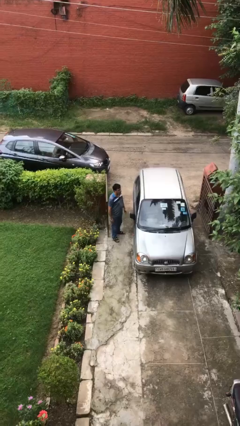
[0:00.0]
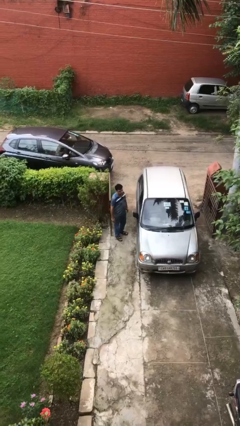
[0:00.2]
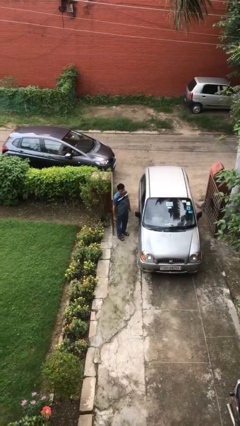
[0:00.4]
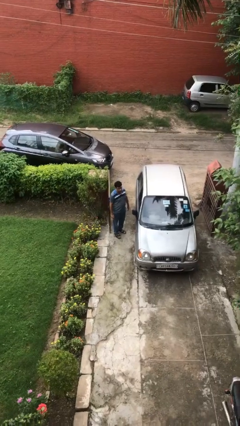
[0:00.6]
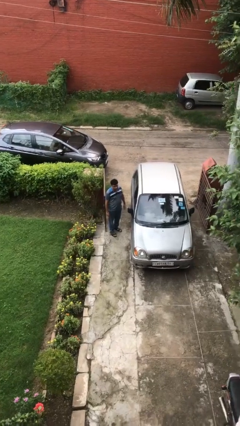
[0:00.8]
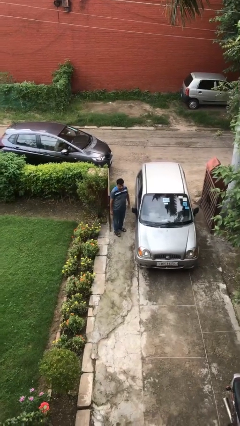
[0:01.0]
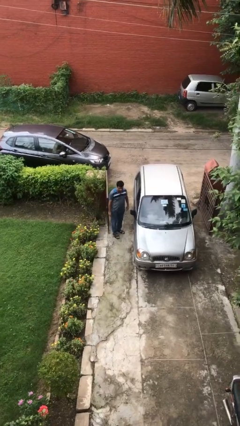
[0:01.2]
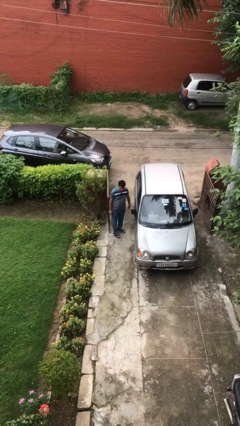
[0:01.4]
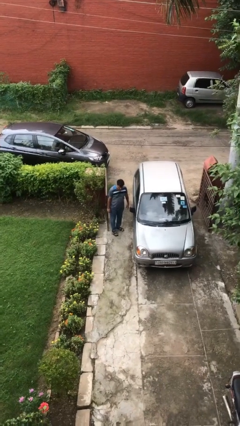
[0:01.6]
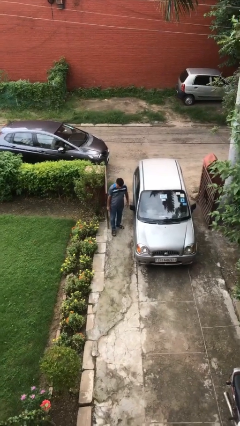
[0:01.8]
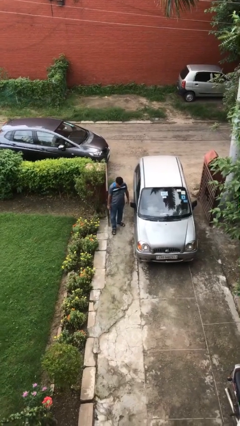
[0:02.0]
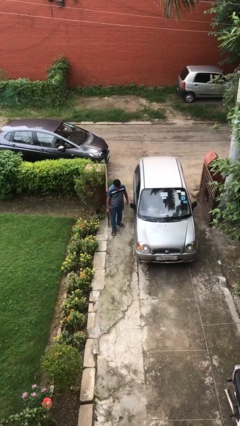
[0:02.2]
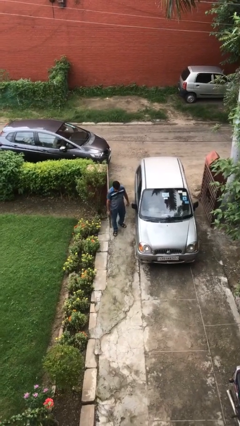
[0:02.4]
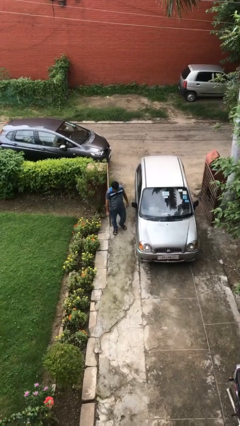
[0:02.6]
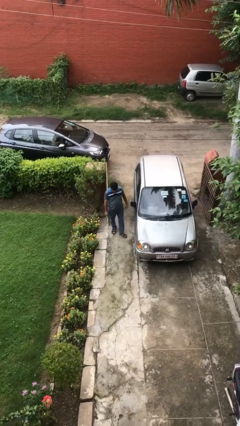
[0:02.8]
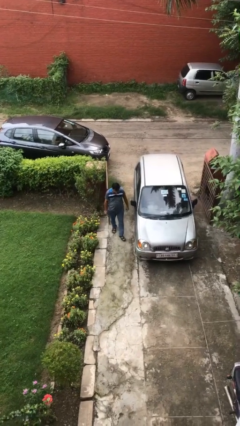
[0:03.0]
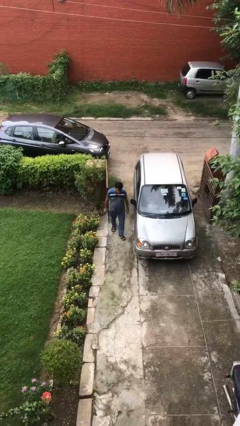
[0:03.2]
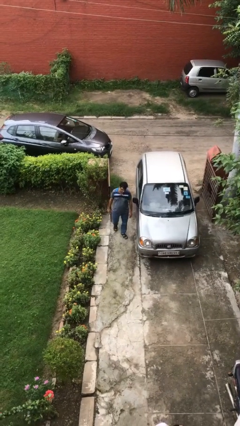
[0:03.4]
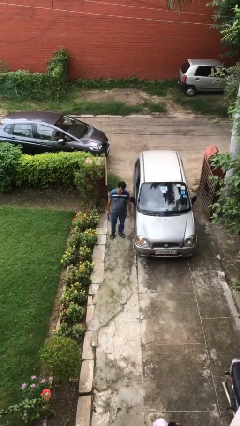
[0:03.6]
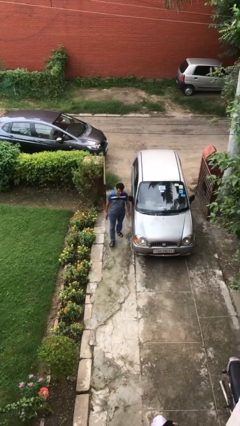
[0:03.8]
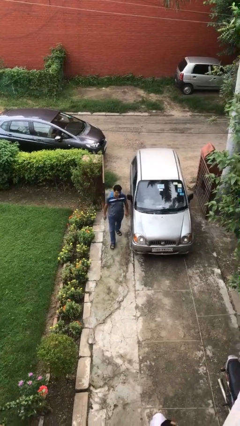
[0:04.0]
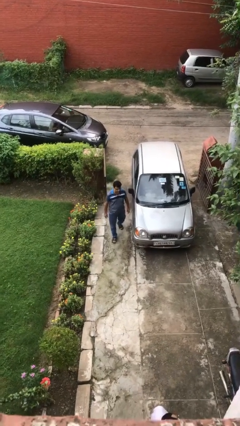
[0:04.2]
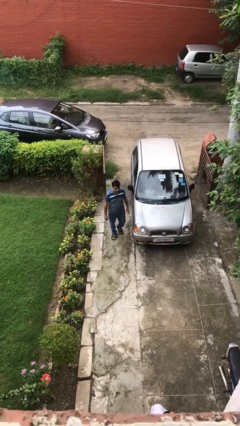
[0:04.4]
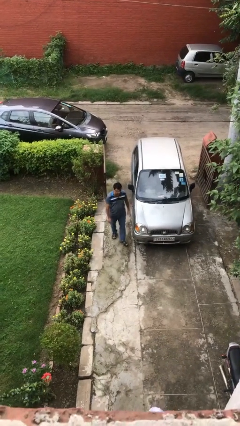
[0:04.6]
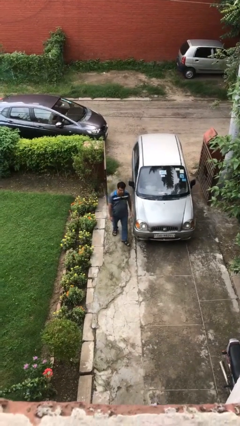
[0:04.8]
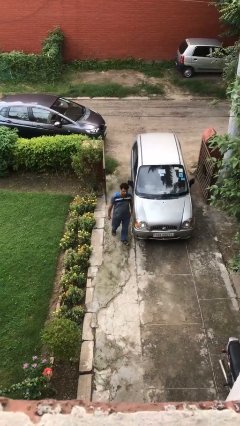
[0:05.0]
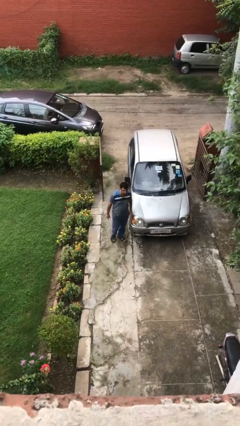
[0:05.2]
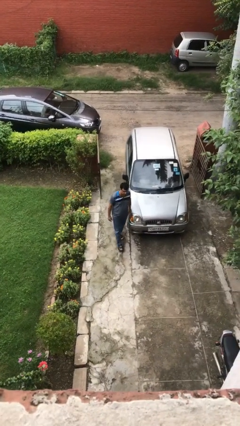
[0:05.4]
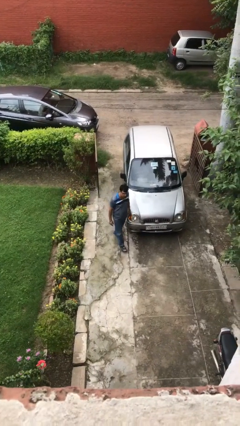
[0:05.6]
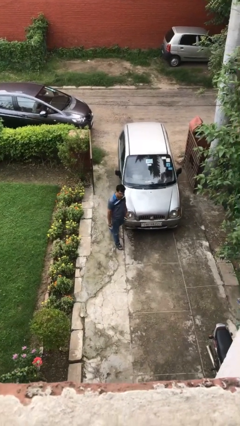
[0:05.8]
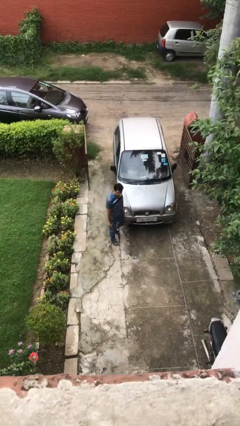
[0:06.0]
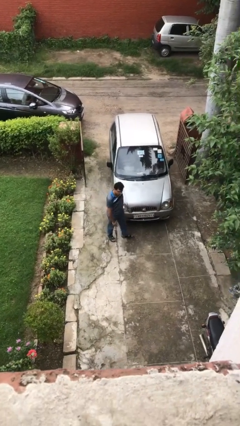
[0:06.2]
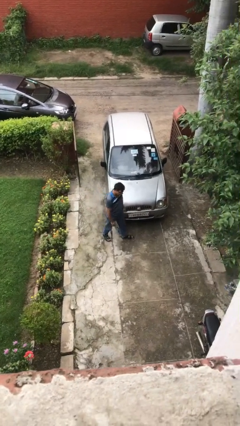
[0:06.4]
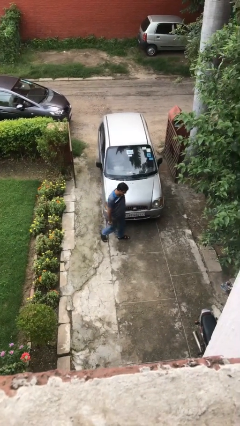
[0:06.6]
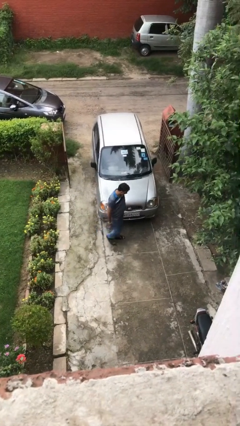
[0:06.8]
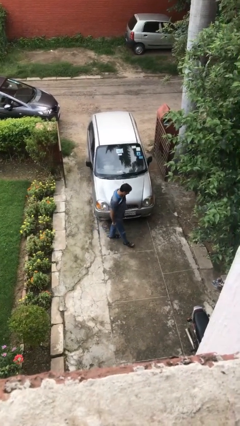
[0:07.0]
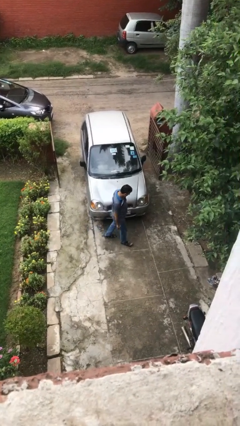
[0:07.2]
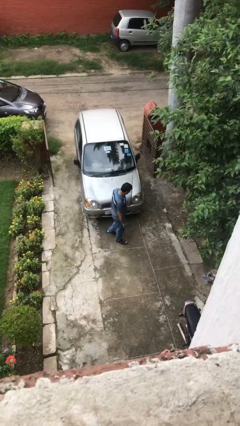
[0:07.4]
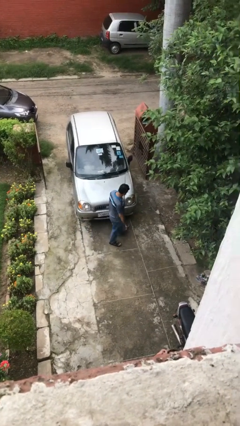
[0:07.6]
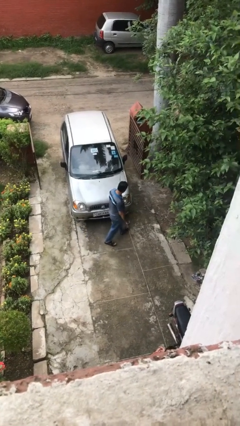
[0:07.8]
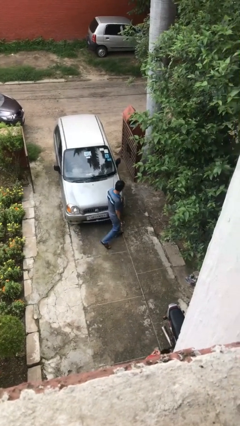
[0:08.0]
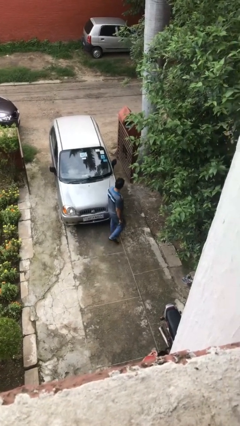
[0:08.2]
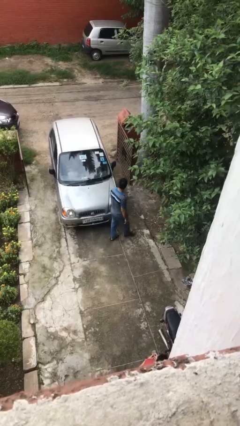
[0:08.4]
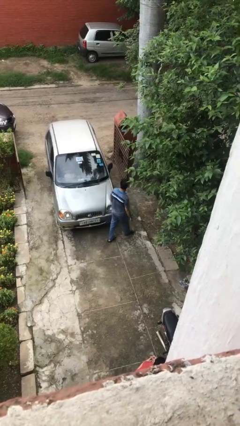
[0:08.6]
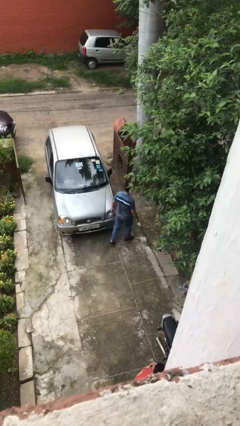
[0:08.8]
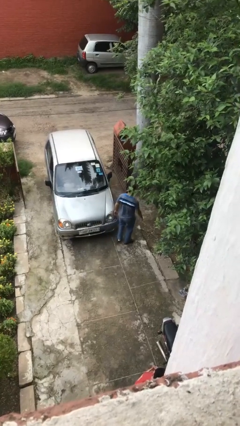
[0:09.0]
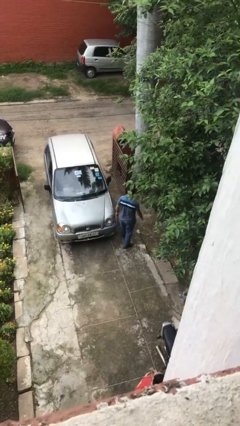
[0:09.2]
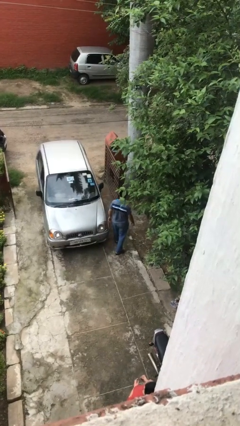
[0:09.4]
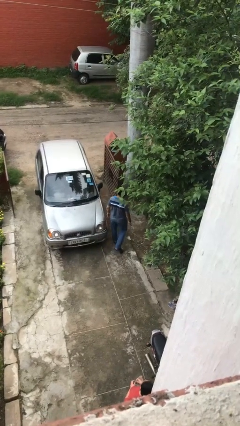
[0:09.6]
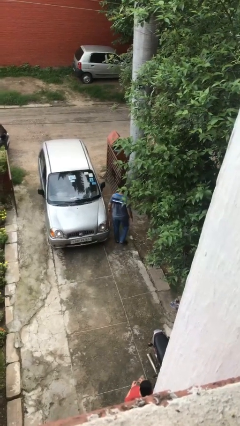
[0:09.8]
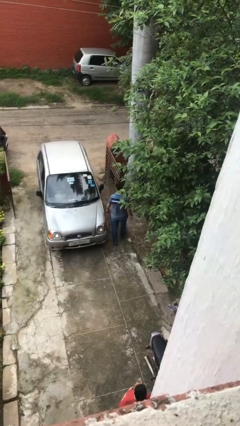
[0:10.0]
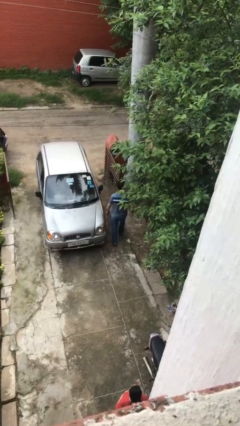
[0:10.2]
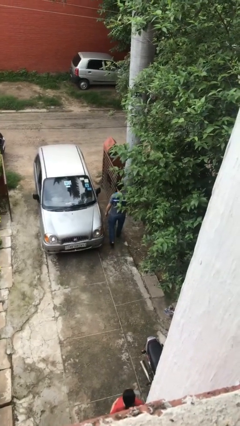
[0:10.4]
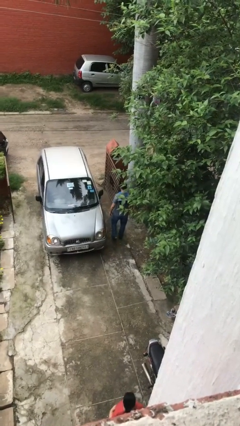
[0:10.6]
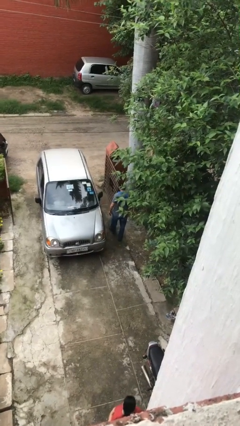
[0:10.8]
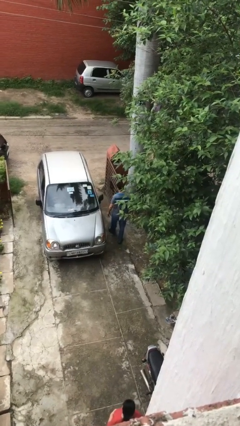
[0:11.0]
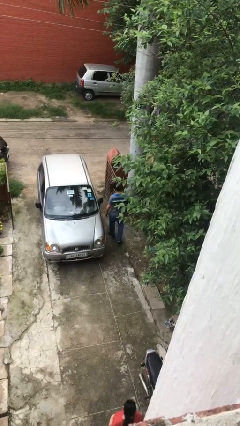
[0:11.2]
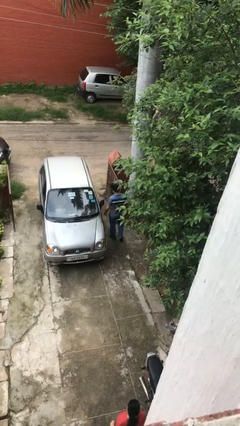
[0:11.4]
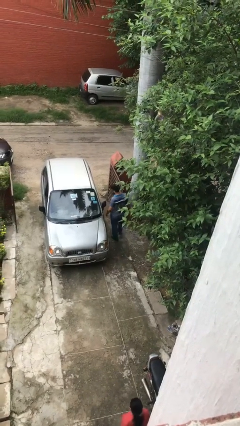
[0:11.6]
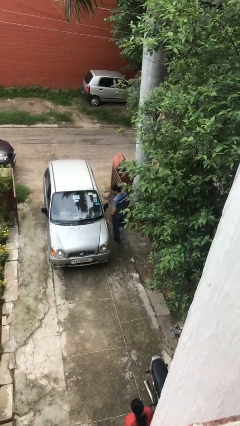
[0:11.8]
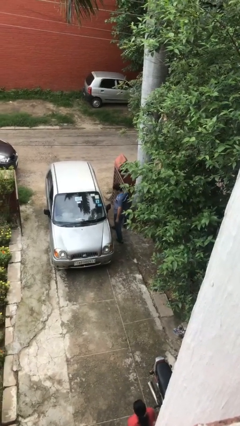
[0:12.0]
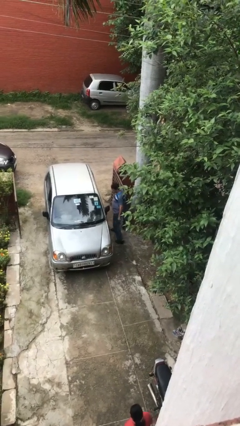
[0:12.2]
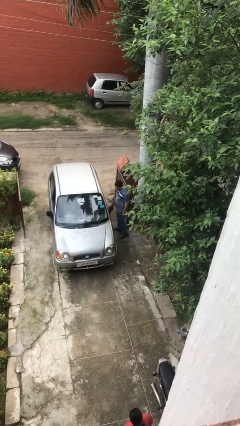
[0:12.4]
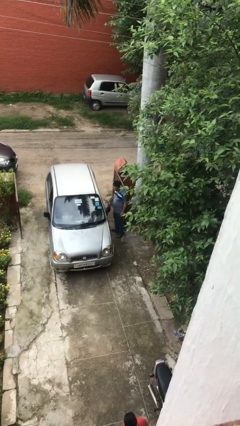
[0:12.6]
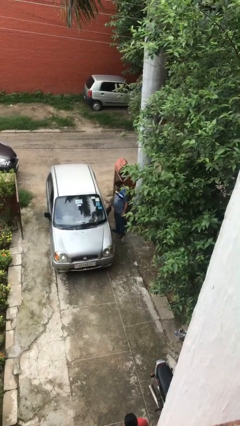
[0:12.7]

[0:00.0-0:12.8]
person walks around car

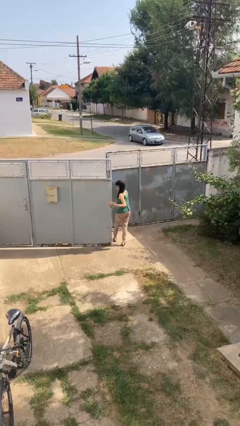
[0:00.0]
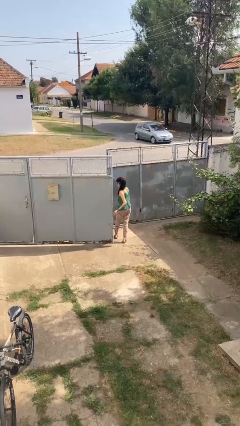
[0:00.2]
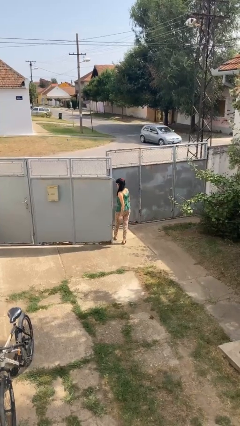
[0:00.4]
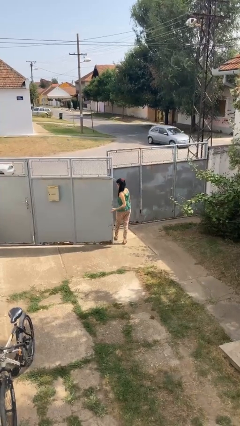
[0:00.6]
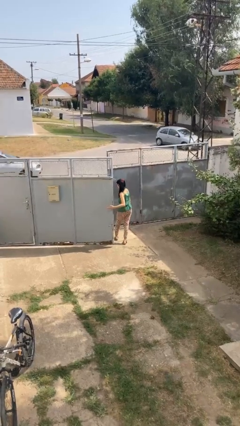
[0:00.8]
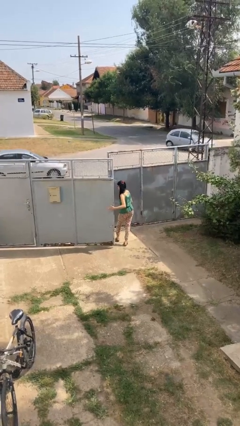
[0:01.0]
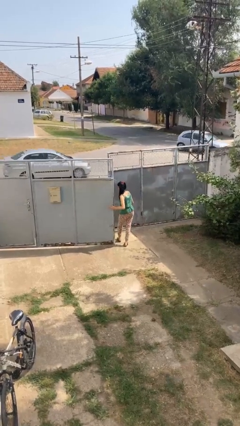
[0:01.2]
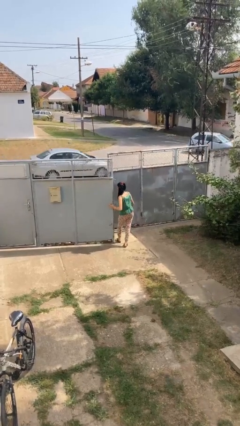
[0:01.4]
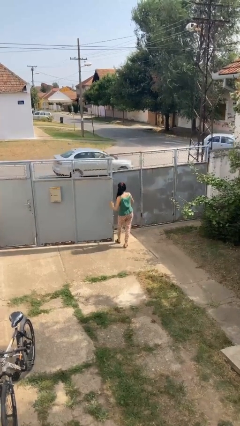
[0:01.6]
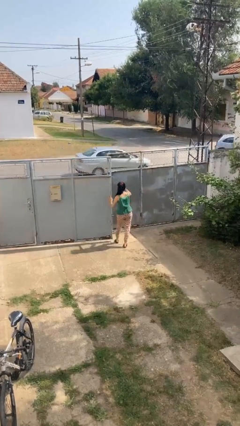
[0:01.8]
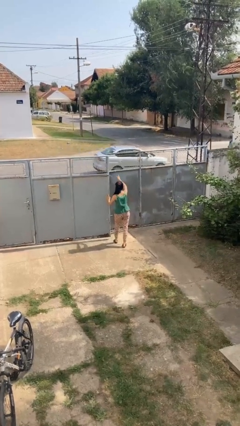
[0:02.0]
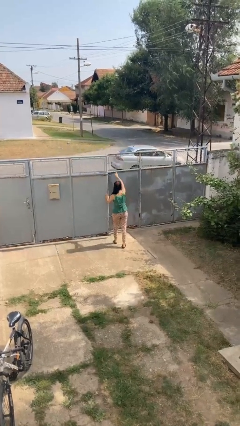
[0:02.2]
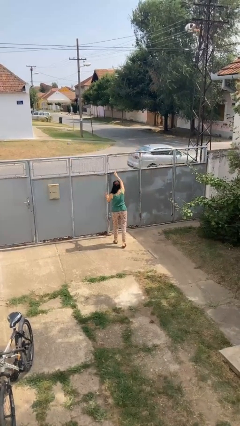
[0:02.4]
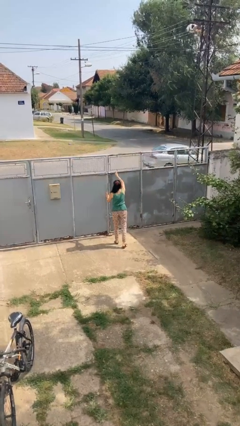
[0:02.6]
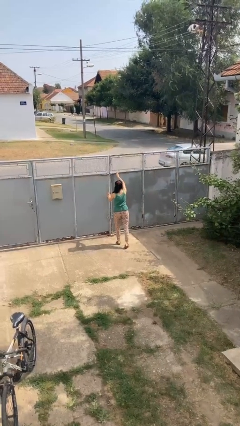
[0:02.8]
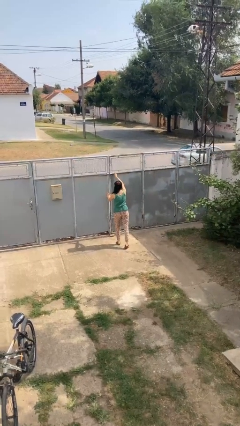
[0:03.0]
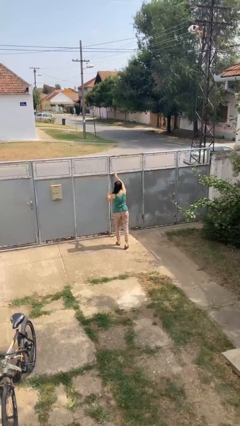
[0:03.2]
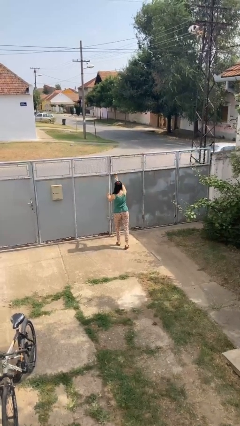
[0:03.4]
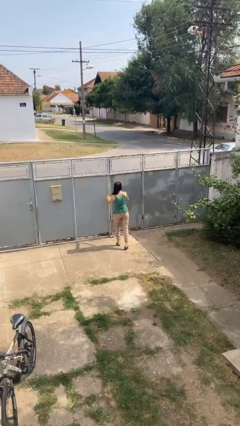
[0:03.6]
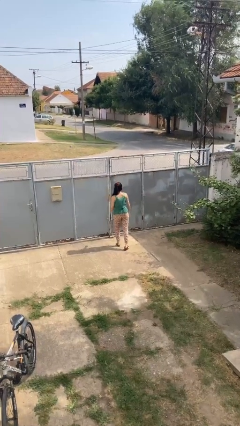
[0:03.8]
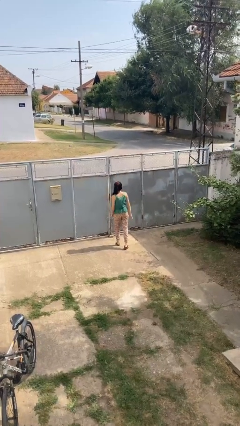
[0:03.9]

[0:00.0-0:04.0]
person closes gate

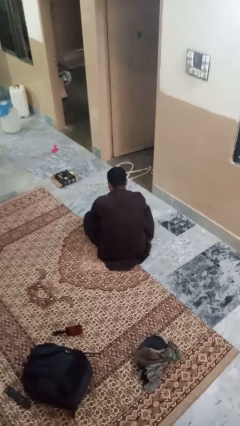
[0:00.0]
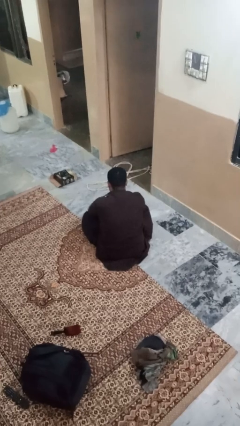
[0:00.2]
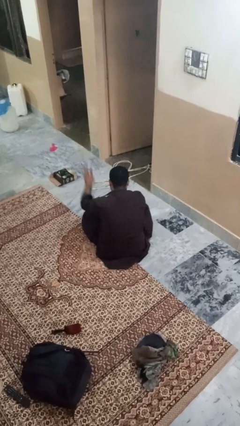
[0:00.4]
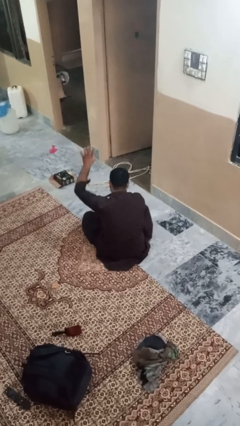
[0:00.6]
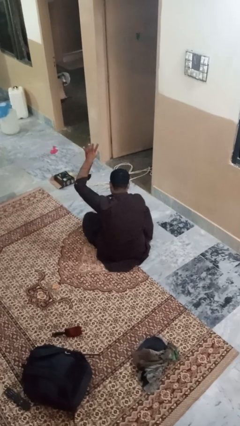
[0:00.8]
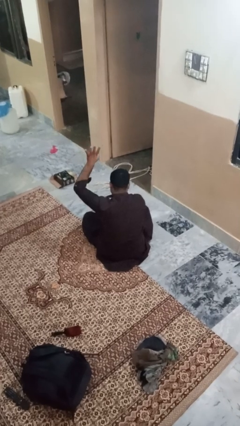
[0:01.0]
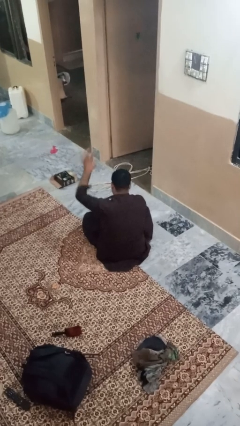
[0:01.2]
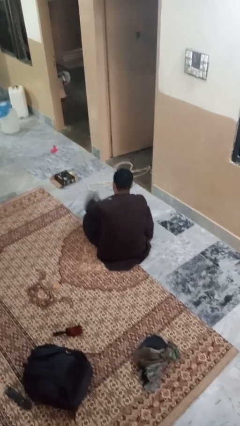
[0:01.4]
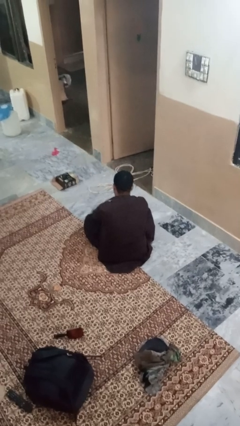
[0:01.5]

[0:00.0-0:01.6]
person gestures number four
